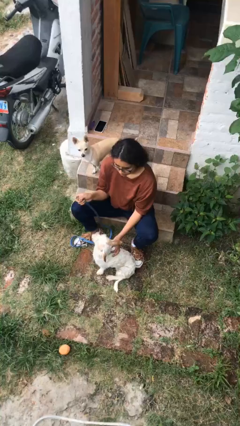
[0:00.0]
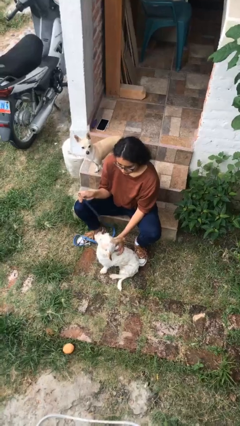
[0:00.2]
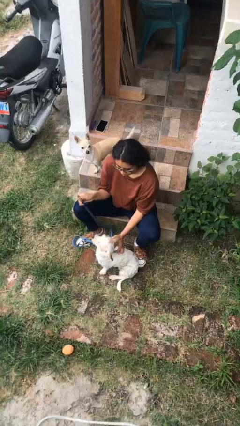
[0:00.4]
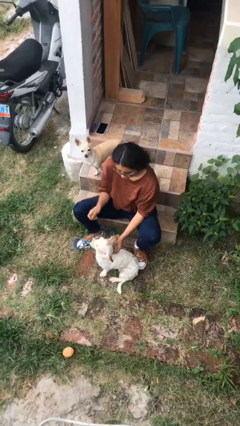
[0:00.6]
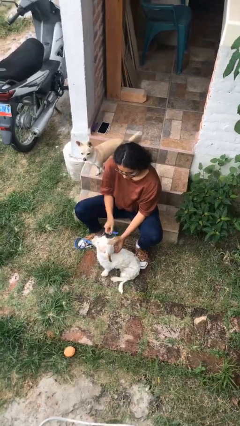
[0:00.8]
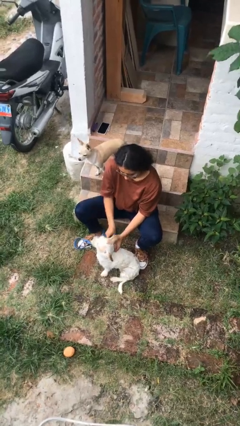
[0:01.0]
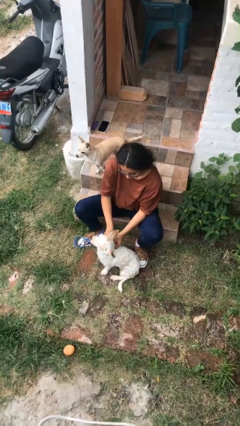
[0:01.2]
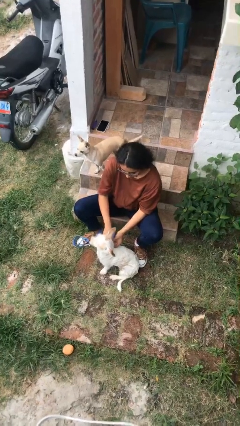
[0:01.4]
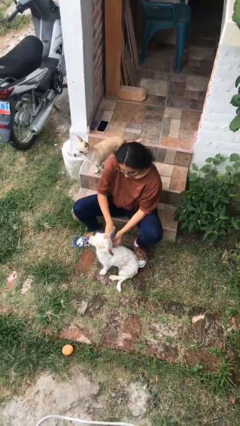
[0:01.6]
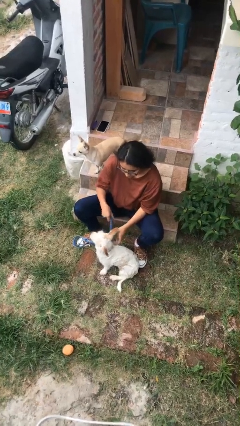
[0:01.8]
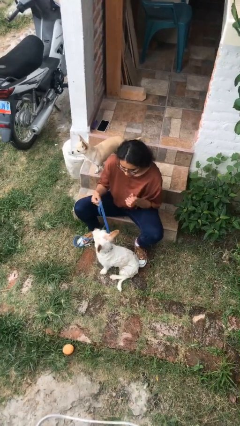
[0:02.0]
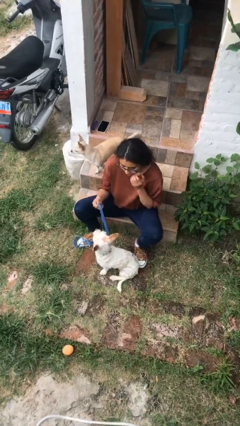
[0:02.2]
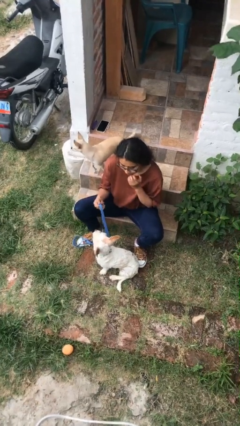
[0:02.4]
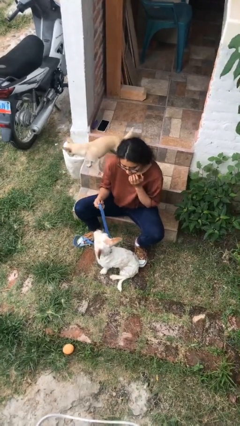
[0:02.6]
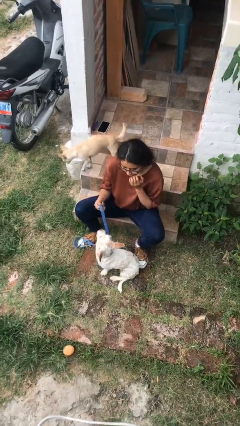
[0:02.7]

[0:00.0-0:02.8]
person attaches leash to dog

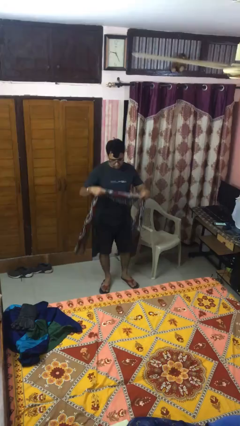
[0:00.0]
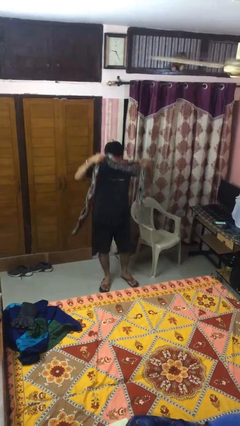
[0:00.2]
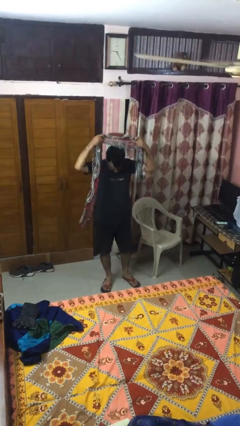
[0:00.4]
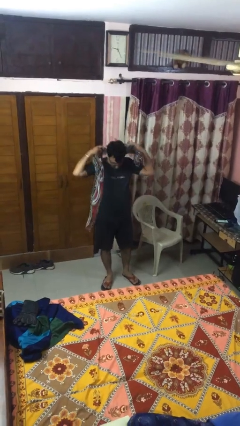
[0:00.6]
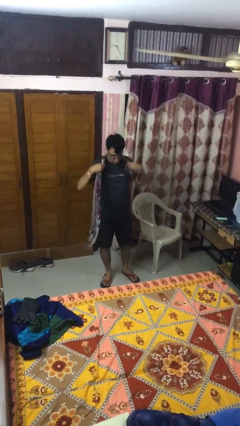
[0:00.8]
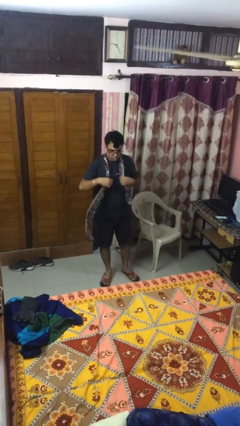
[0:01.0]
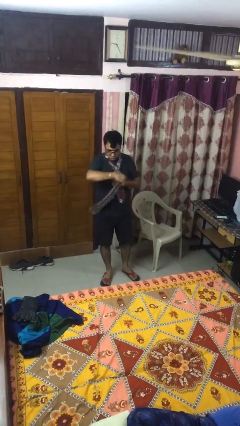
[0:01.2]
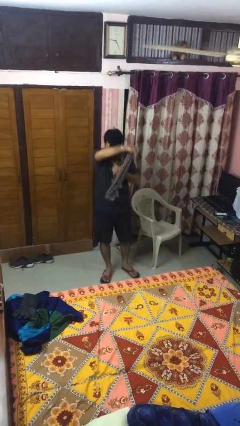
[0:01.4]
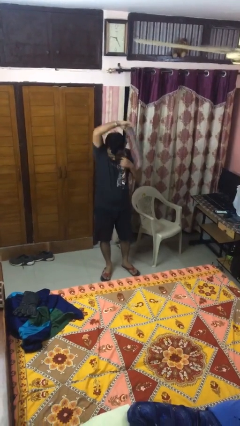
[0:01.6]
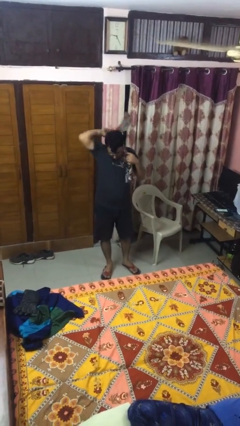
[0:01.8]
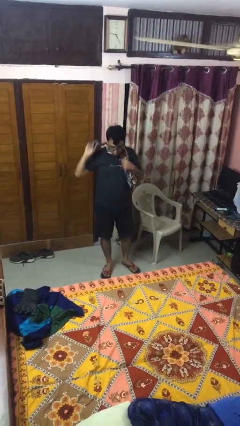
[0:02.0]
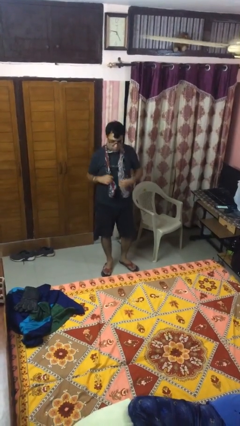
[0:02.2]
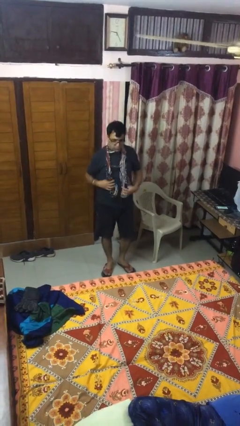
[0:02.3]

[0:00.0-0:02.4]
person puts on scarf

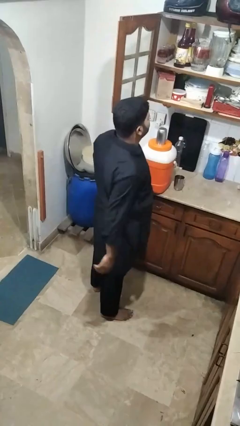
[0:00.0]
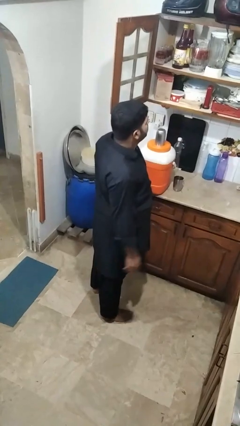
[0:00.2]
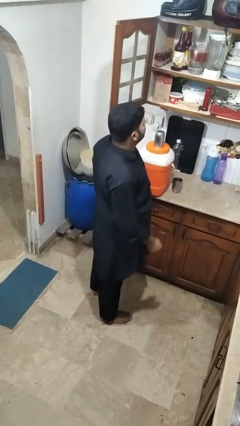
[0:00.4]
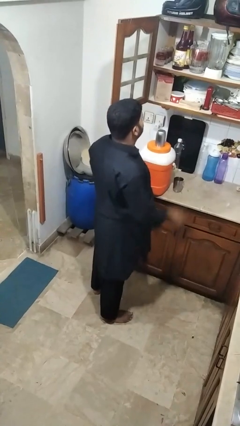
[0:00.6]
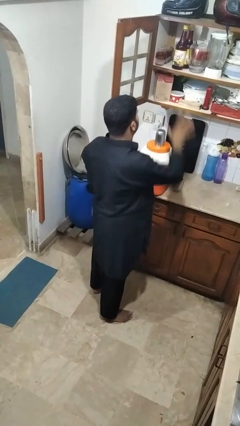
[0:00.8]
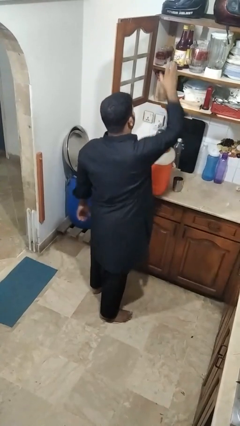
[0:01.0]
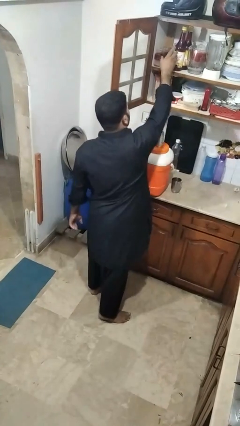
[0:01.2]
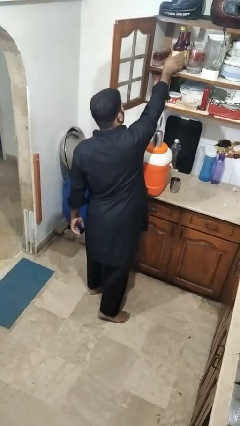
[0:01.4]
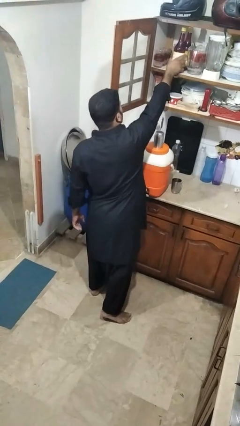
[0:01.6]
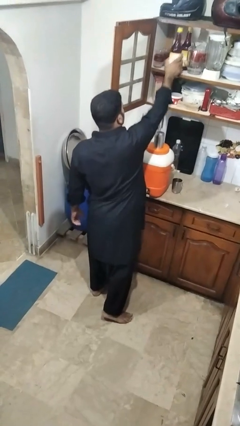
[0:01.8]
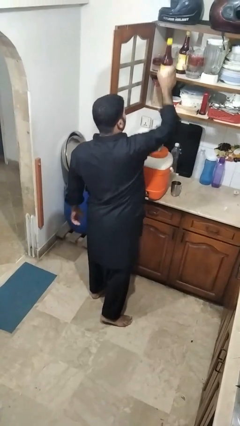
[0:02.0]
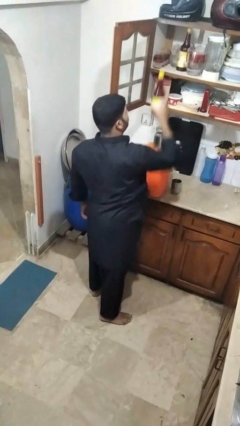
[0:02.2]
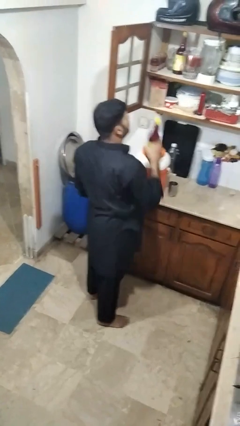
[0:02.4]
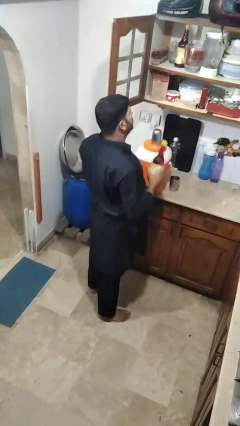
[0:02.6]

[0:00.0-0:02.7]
person picks up object from cabinet

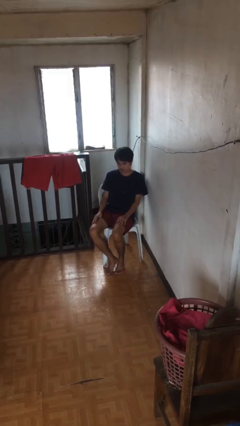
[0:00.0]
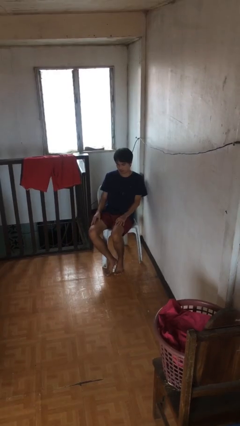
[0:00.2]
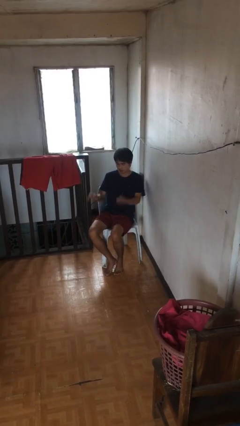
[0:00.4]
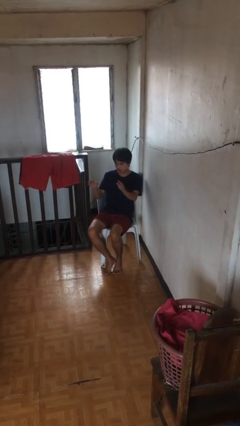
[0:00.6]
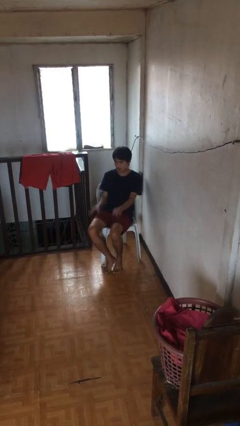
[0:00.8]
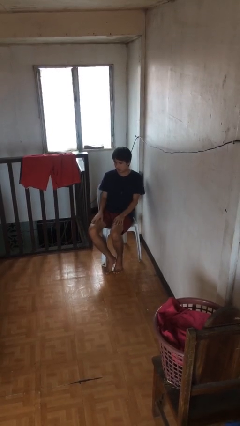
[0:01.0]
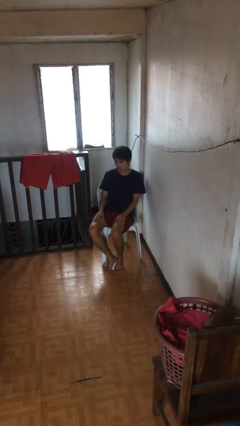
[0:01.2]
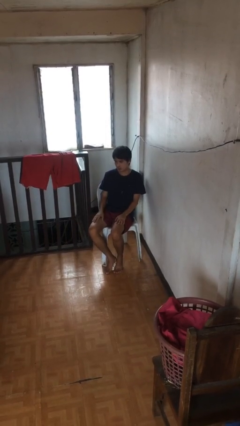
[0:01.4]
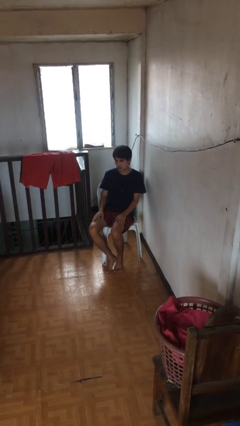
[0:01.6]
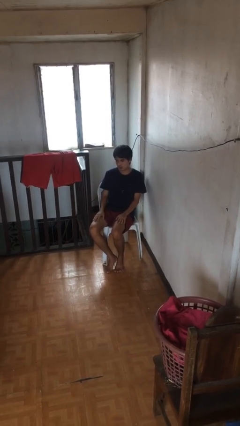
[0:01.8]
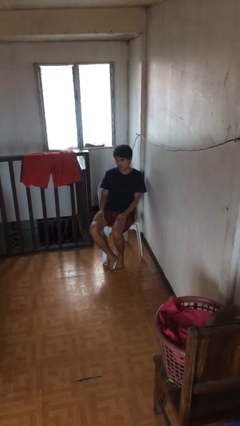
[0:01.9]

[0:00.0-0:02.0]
person slaps hands on thighs

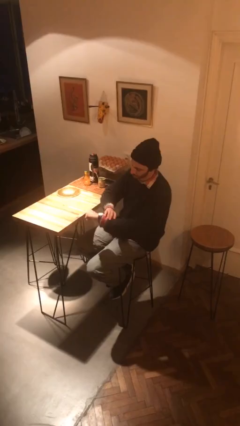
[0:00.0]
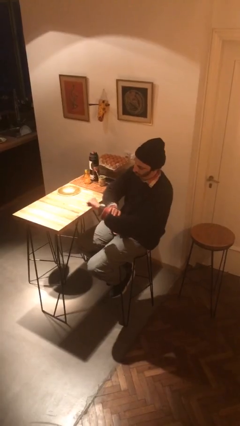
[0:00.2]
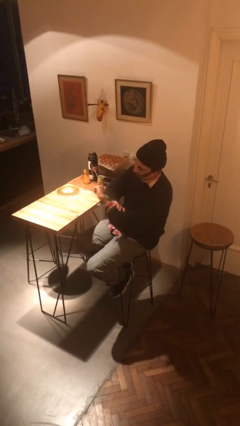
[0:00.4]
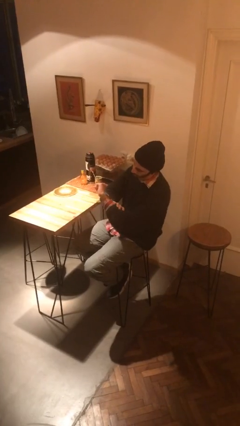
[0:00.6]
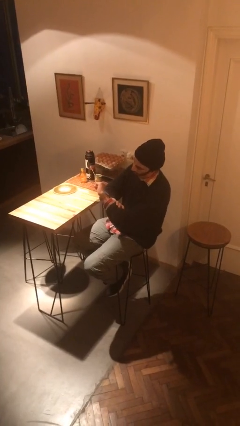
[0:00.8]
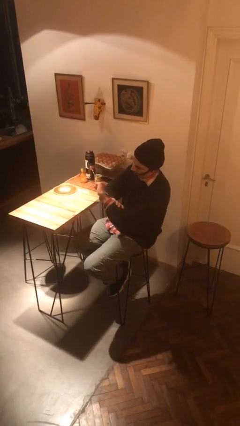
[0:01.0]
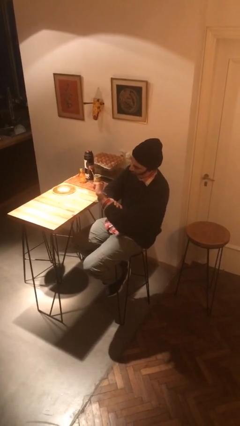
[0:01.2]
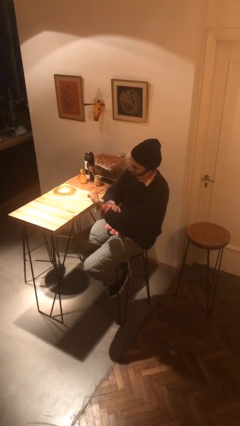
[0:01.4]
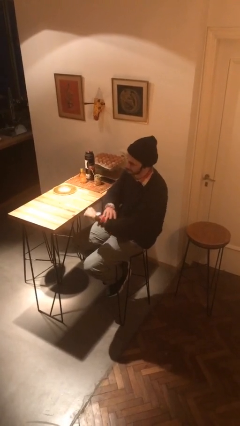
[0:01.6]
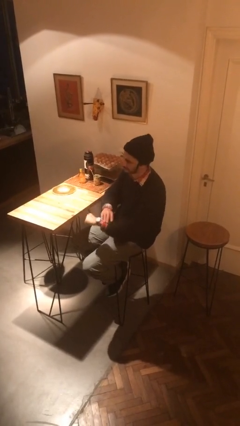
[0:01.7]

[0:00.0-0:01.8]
person looks at wristwatch

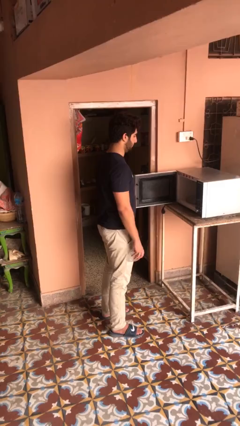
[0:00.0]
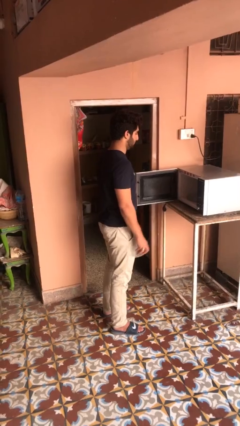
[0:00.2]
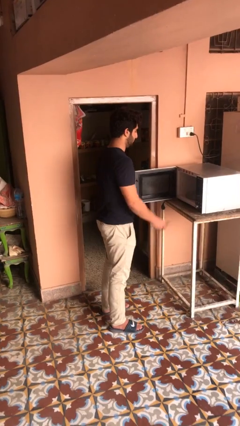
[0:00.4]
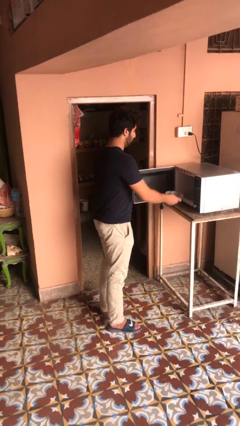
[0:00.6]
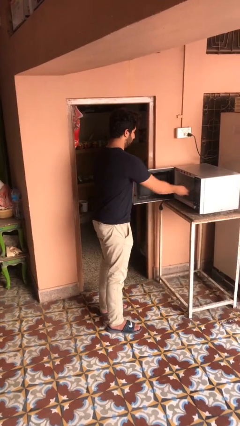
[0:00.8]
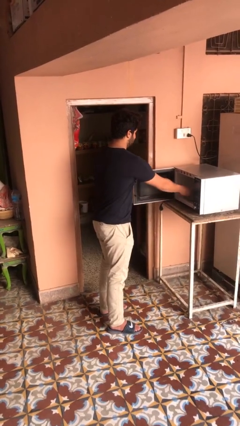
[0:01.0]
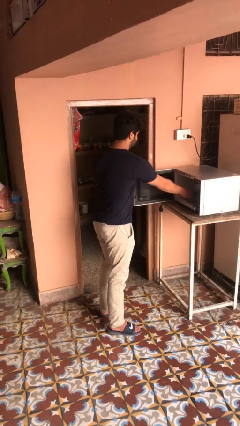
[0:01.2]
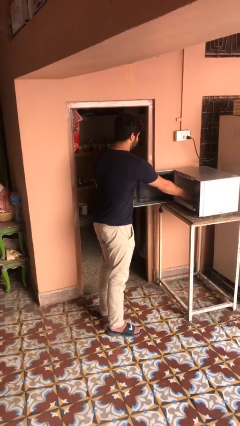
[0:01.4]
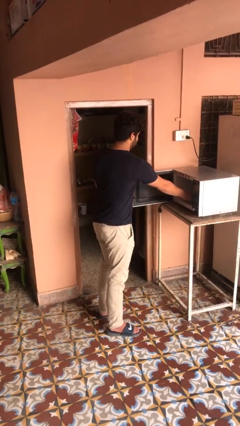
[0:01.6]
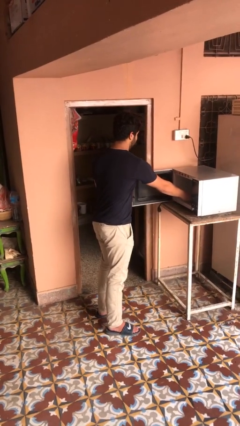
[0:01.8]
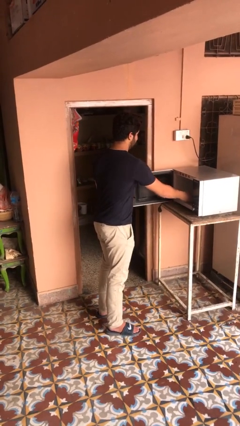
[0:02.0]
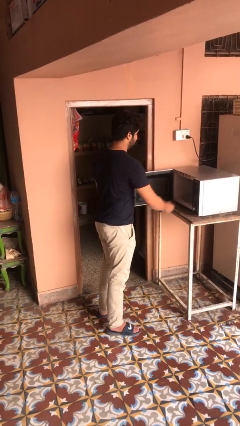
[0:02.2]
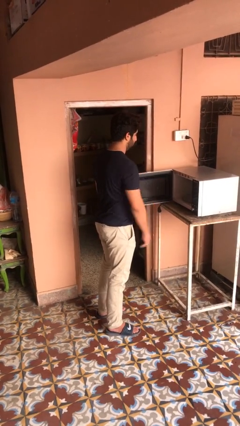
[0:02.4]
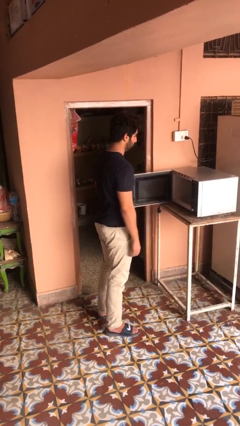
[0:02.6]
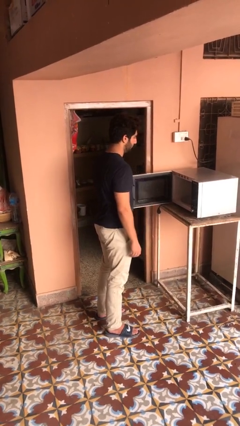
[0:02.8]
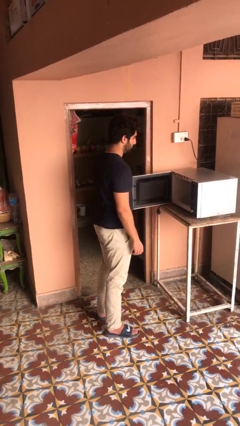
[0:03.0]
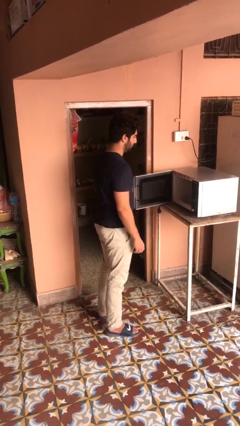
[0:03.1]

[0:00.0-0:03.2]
person puts object into microwave

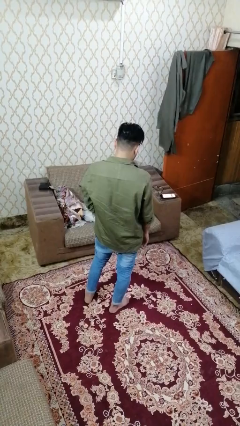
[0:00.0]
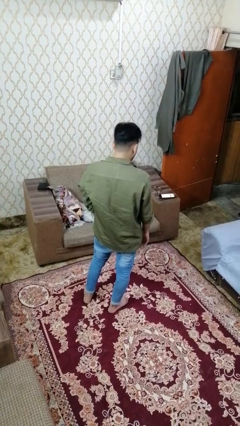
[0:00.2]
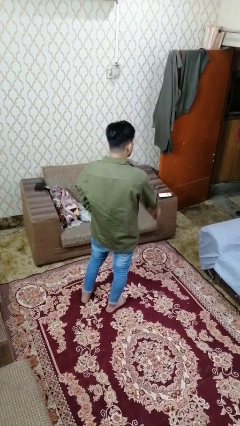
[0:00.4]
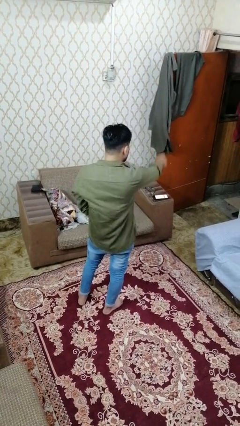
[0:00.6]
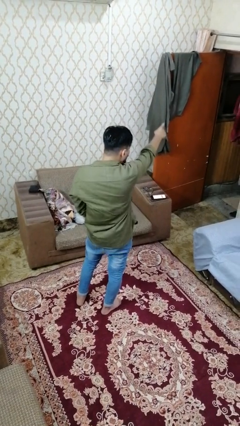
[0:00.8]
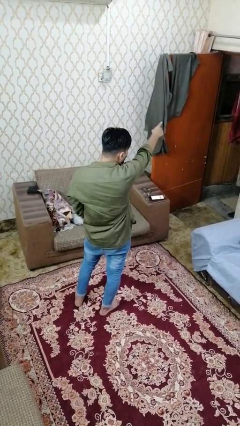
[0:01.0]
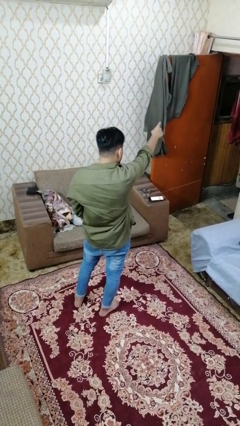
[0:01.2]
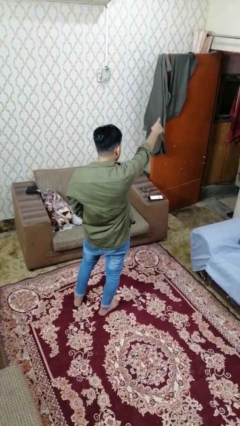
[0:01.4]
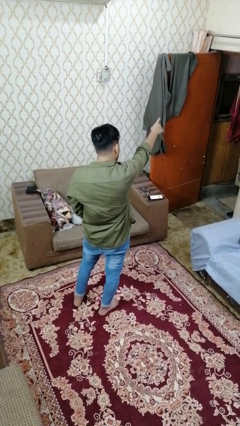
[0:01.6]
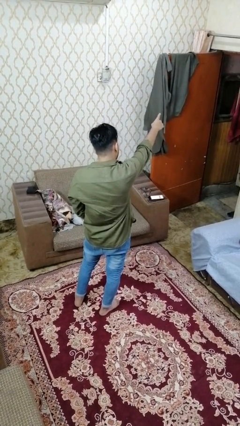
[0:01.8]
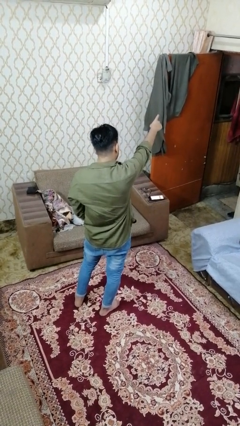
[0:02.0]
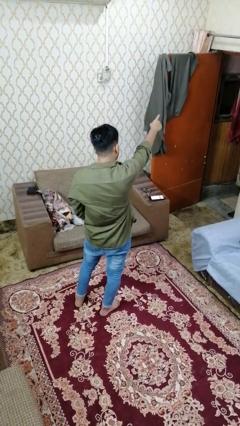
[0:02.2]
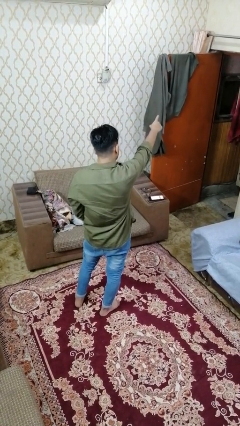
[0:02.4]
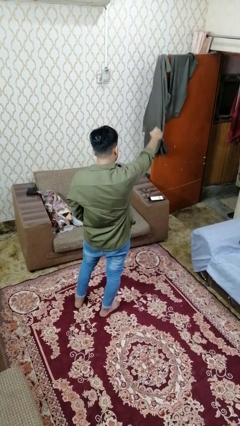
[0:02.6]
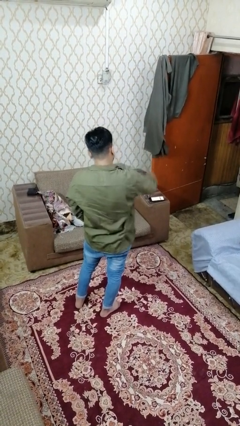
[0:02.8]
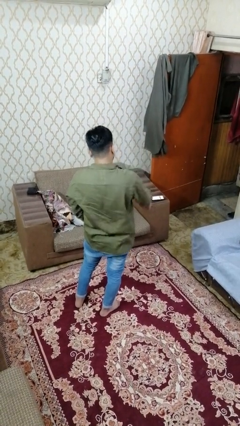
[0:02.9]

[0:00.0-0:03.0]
person points at person
